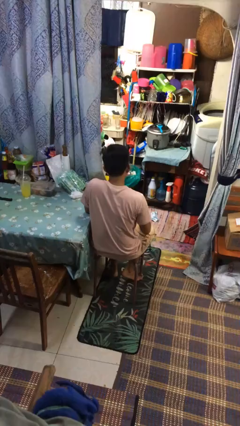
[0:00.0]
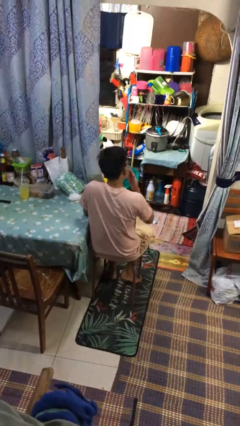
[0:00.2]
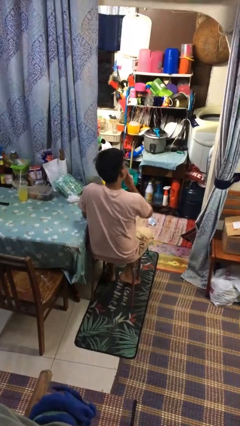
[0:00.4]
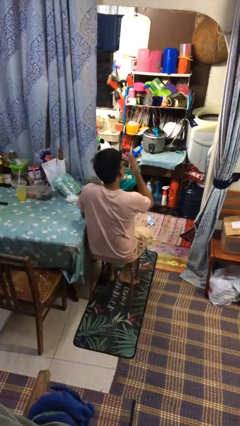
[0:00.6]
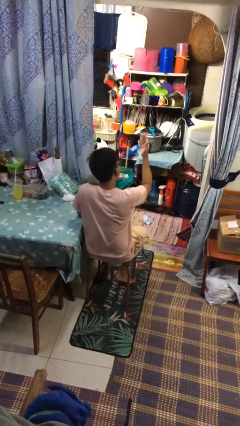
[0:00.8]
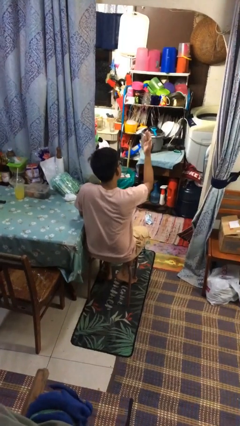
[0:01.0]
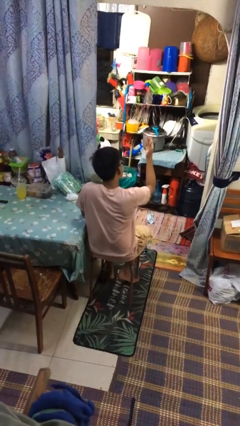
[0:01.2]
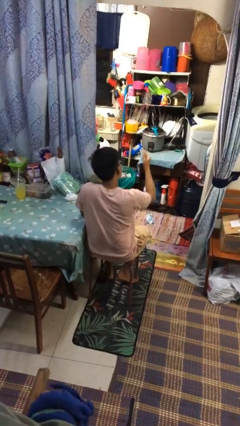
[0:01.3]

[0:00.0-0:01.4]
person gestures blow kiss

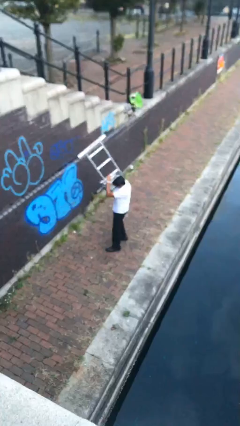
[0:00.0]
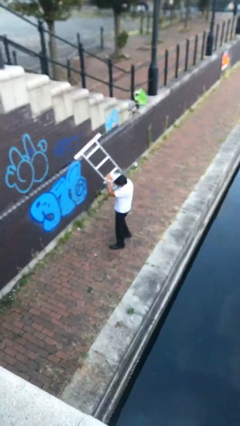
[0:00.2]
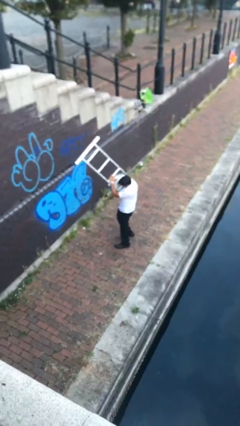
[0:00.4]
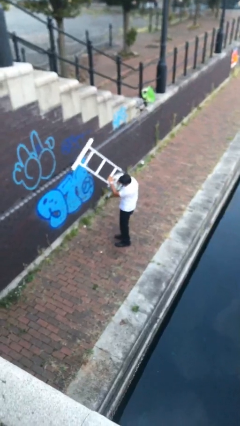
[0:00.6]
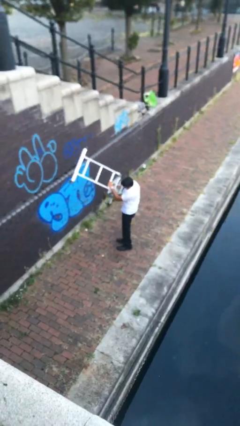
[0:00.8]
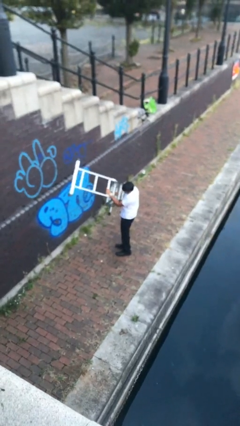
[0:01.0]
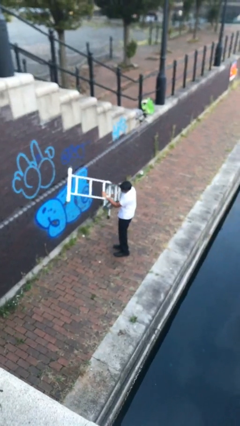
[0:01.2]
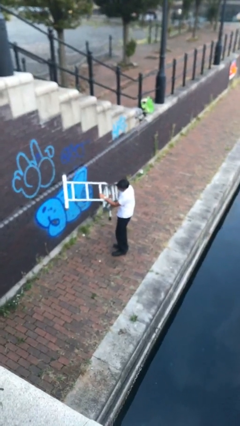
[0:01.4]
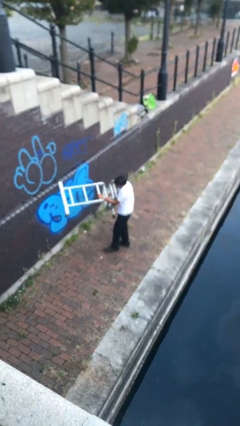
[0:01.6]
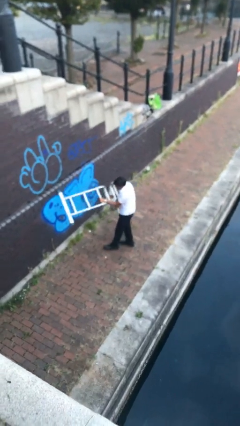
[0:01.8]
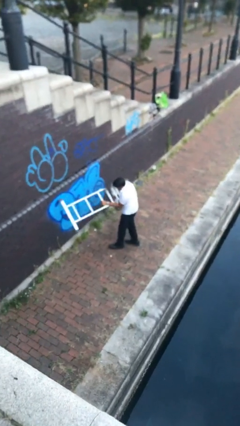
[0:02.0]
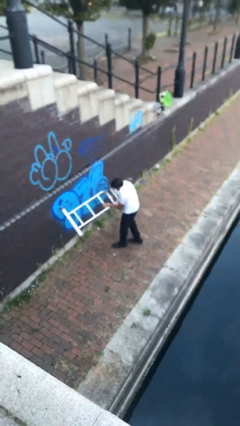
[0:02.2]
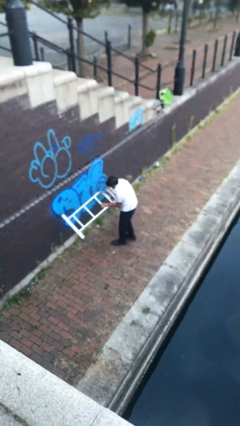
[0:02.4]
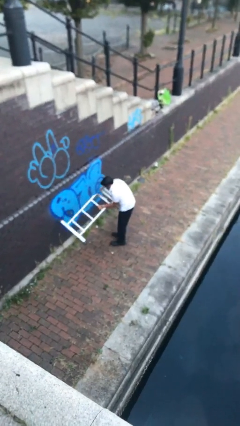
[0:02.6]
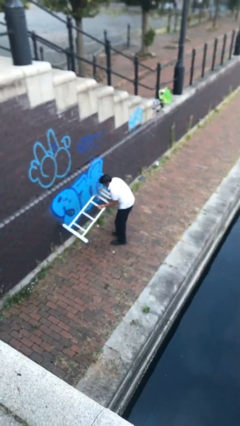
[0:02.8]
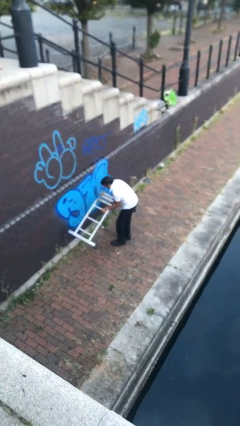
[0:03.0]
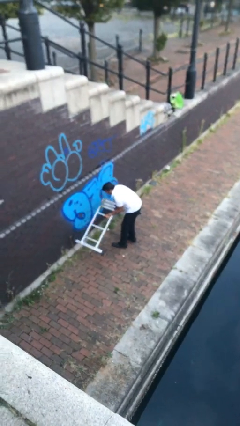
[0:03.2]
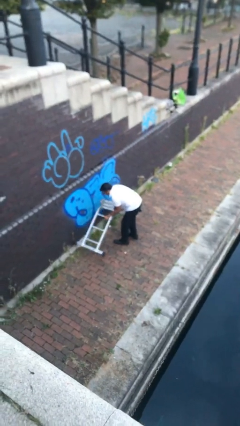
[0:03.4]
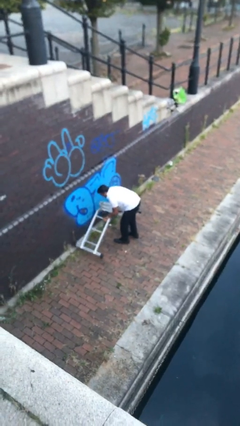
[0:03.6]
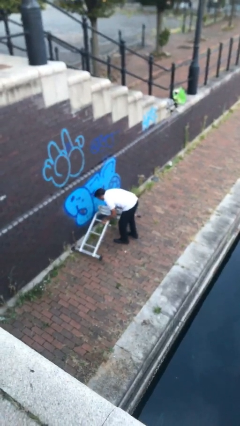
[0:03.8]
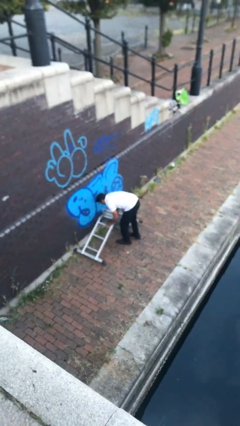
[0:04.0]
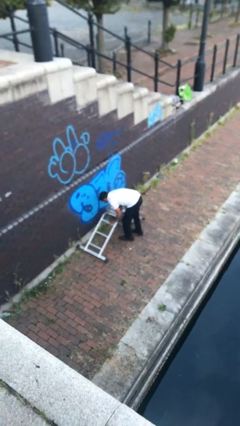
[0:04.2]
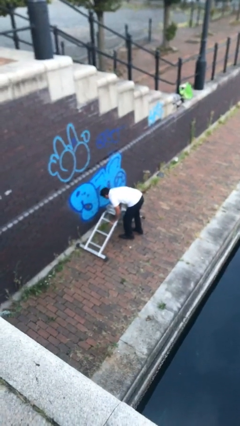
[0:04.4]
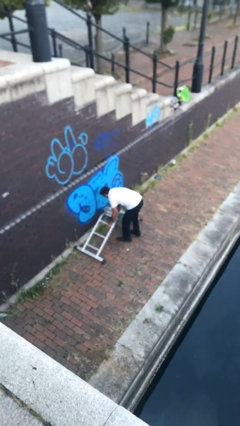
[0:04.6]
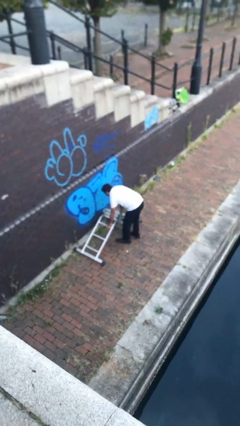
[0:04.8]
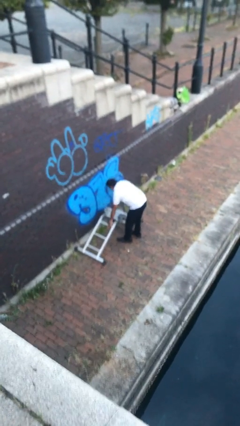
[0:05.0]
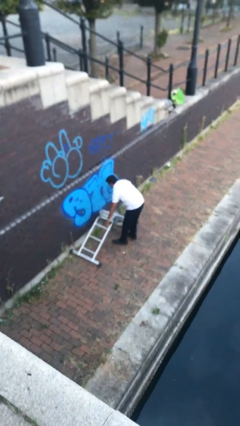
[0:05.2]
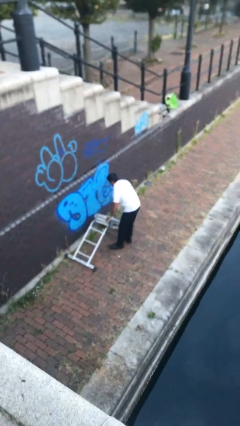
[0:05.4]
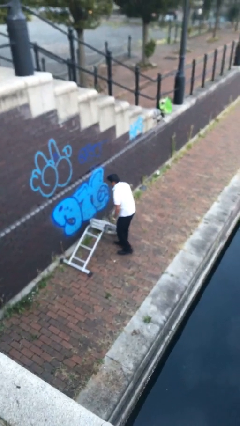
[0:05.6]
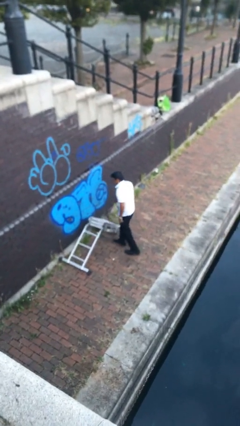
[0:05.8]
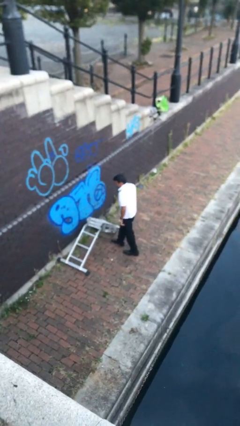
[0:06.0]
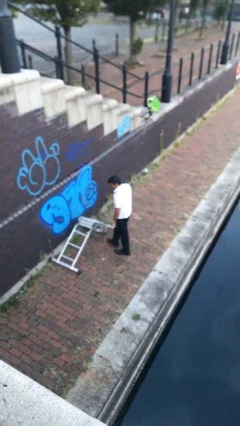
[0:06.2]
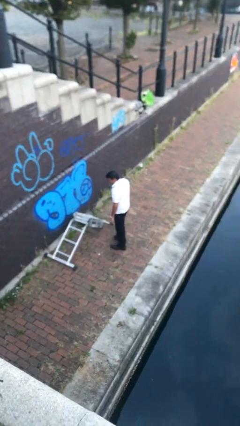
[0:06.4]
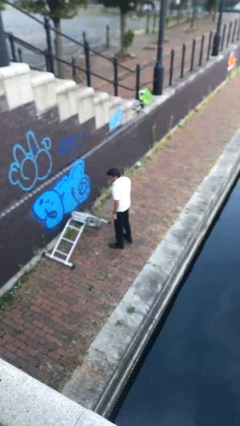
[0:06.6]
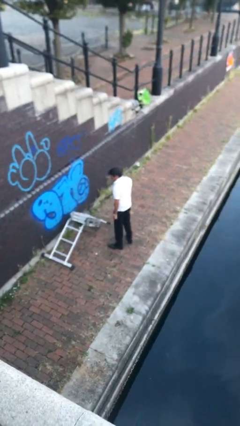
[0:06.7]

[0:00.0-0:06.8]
person puts down object on floor

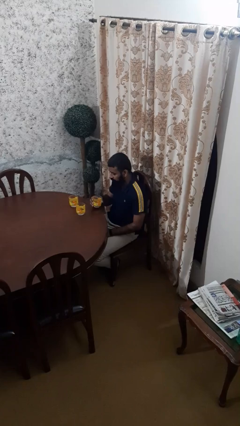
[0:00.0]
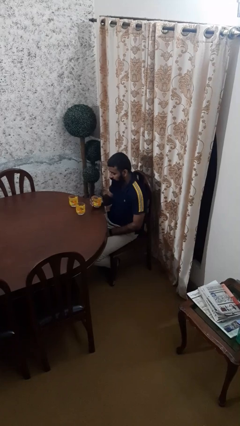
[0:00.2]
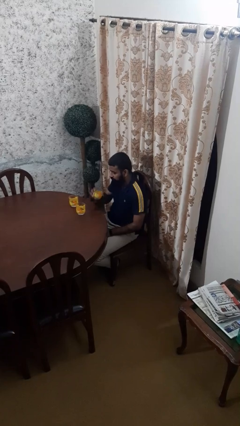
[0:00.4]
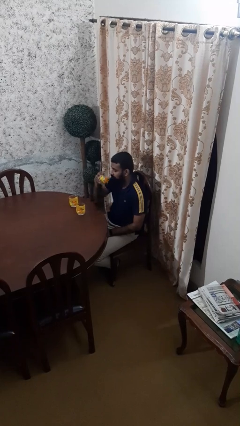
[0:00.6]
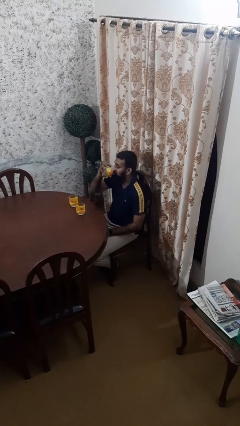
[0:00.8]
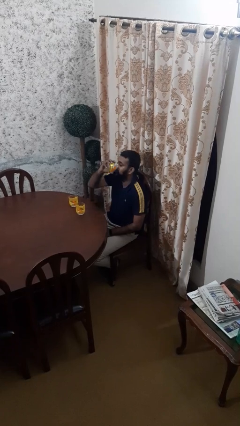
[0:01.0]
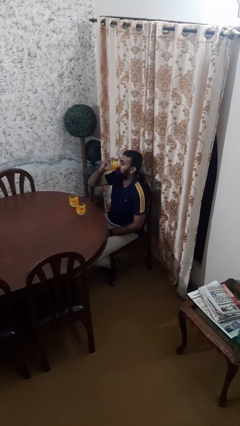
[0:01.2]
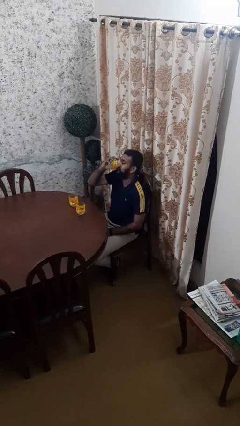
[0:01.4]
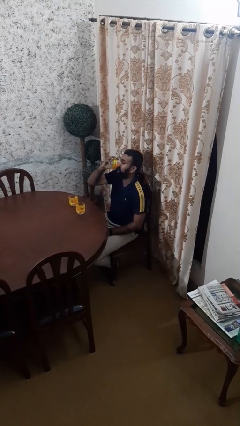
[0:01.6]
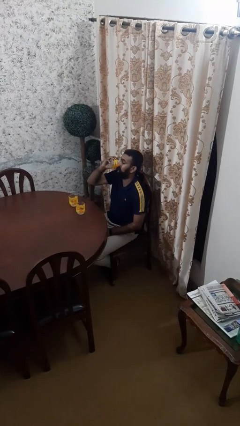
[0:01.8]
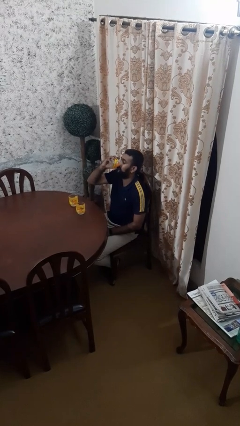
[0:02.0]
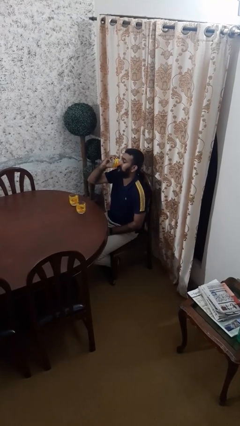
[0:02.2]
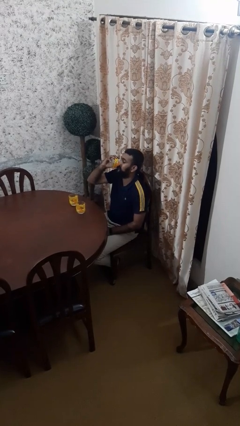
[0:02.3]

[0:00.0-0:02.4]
person drinks from shotglass

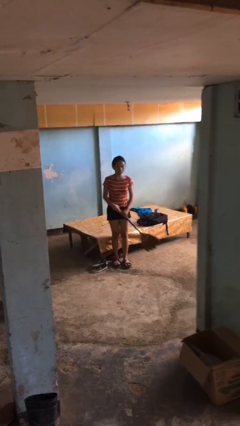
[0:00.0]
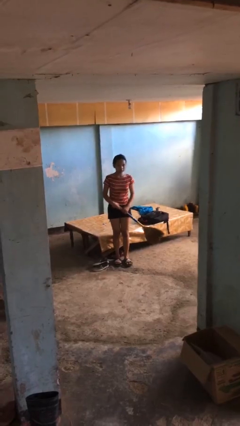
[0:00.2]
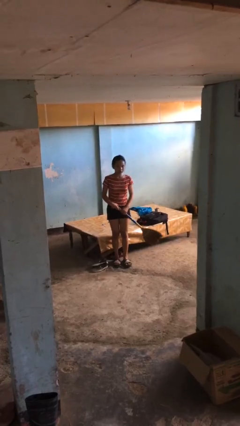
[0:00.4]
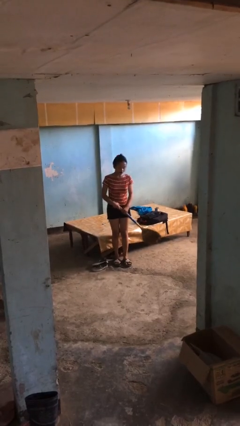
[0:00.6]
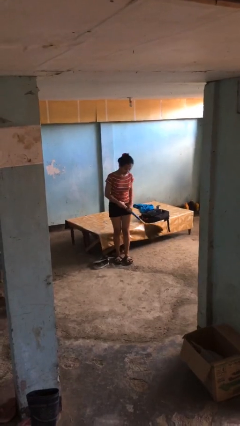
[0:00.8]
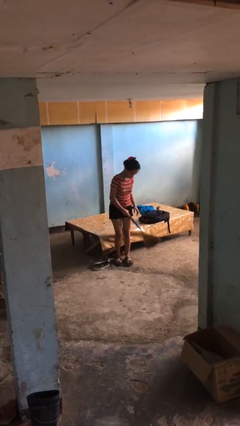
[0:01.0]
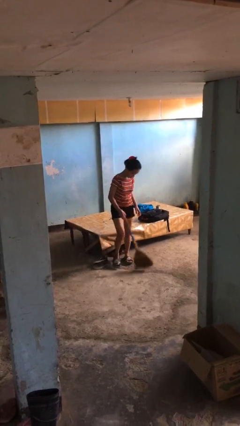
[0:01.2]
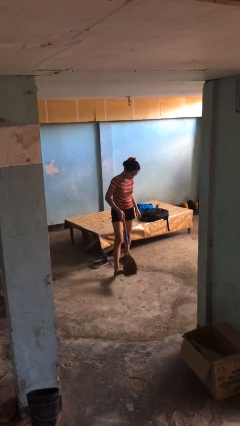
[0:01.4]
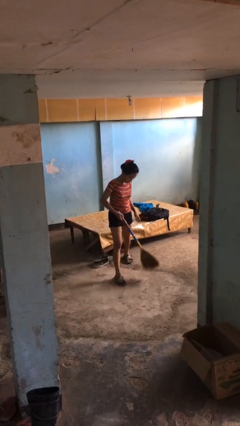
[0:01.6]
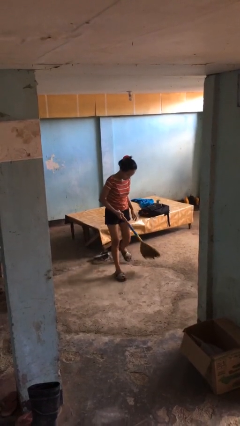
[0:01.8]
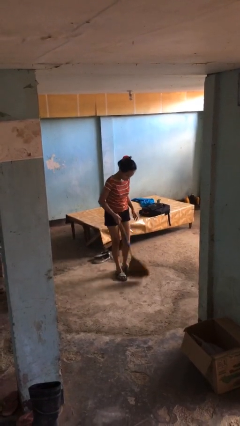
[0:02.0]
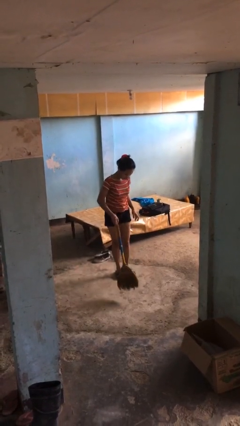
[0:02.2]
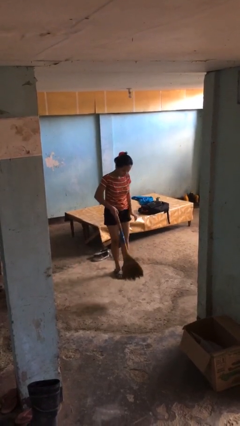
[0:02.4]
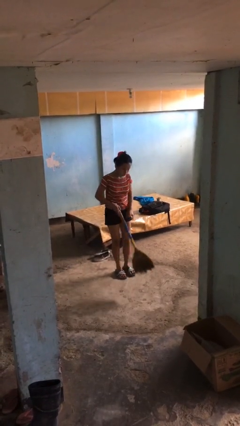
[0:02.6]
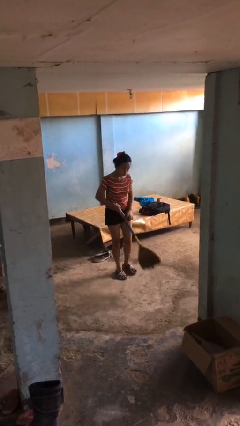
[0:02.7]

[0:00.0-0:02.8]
person sweeps floor

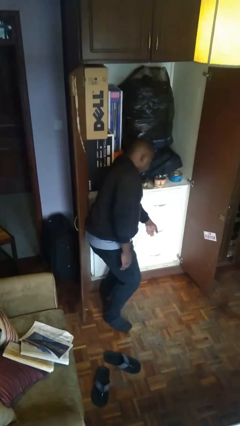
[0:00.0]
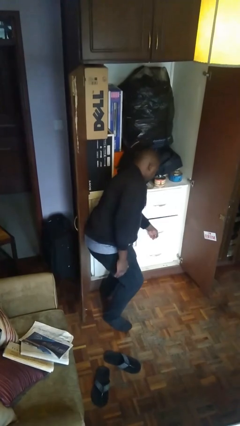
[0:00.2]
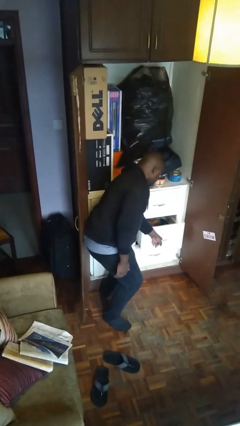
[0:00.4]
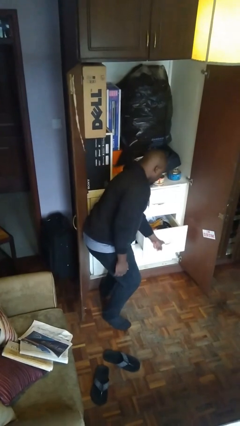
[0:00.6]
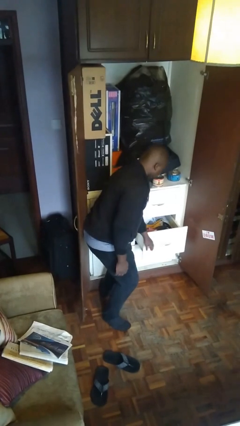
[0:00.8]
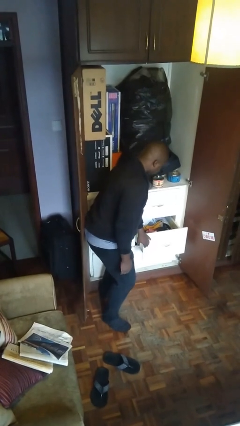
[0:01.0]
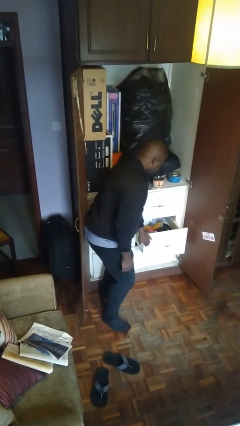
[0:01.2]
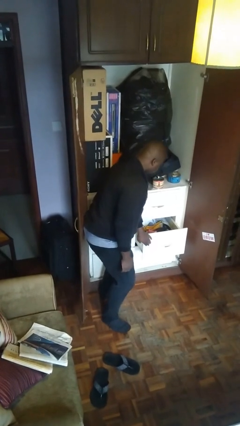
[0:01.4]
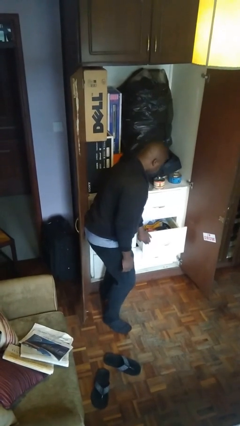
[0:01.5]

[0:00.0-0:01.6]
person opens dresser drawer

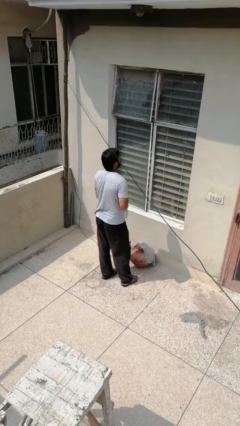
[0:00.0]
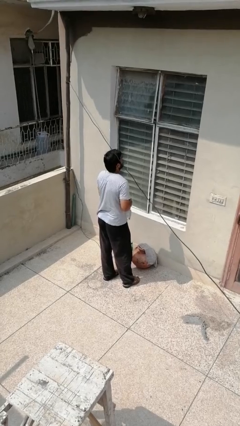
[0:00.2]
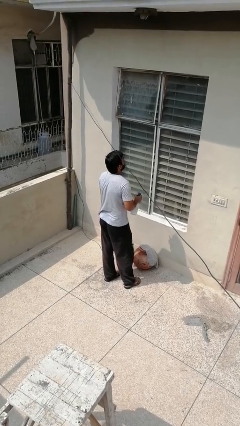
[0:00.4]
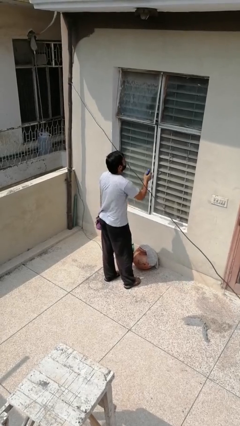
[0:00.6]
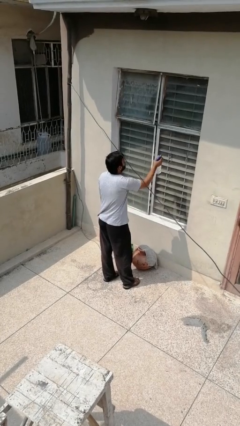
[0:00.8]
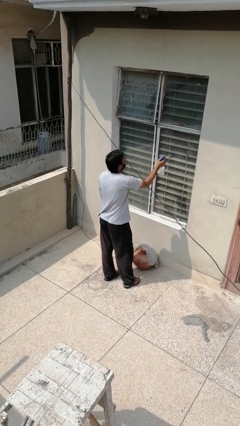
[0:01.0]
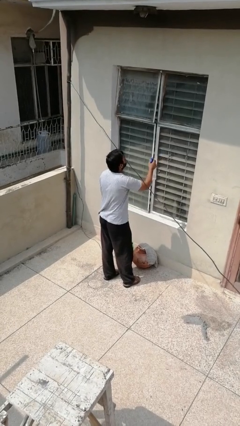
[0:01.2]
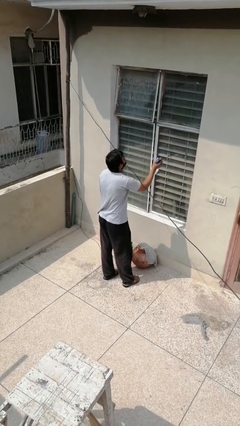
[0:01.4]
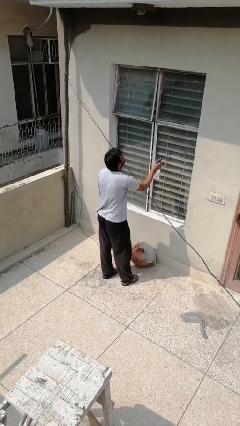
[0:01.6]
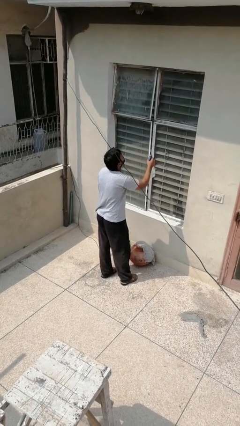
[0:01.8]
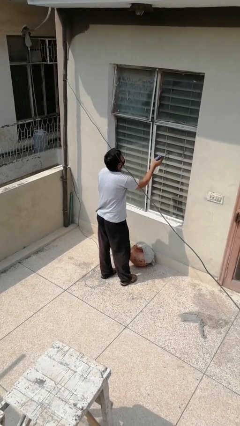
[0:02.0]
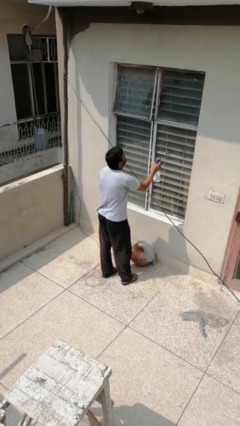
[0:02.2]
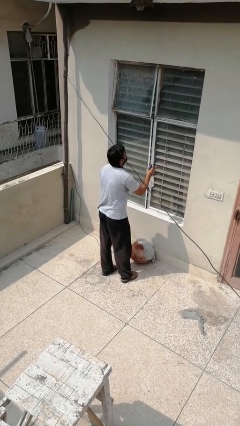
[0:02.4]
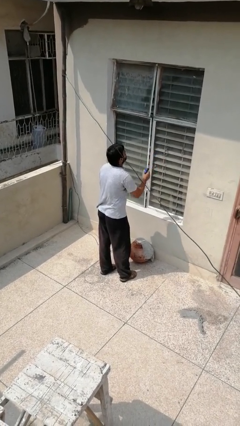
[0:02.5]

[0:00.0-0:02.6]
person sprays from bottle
